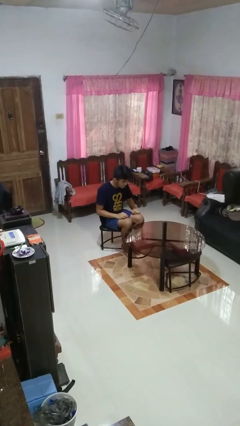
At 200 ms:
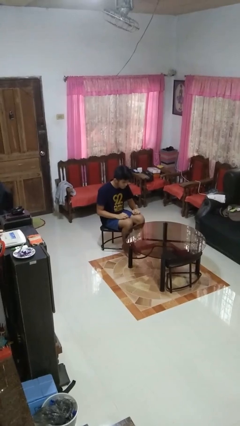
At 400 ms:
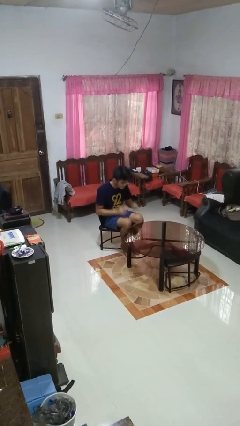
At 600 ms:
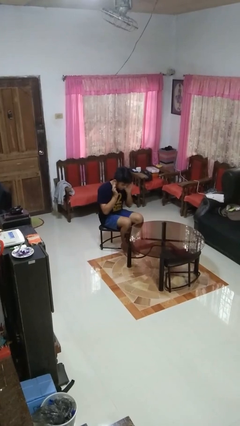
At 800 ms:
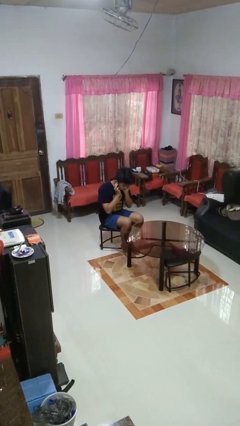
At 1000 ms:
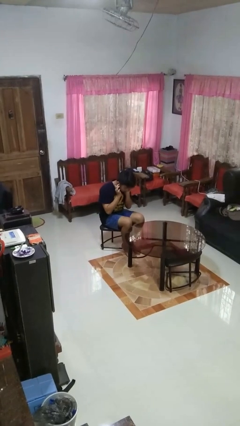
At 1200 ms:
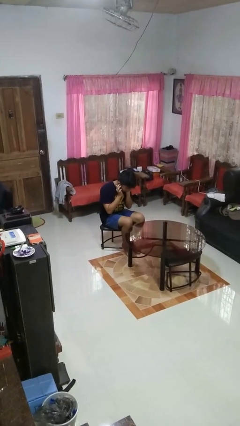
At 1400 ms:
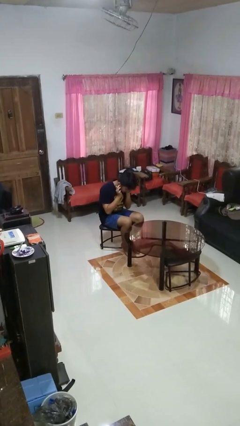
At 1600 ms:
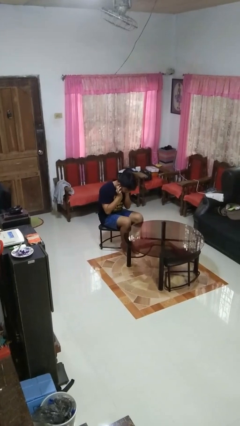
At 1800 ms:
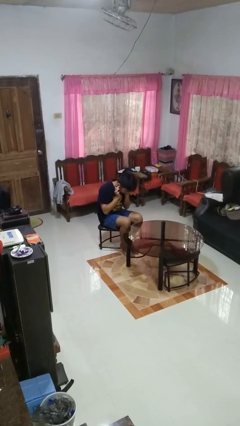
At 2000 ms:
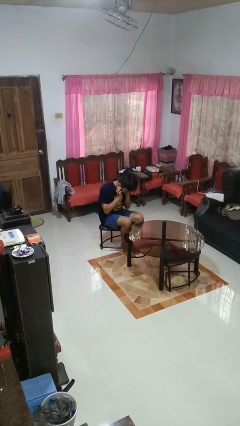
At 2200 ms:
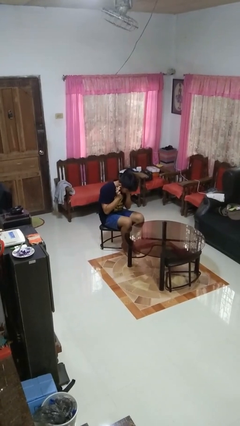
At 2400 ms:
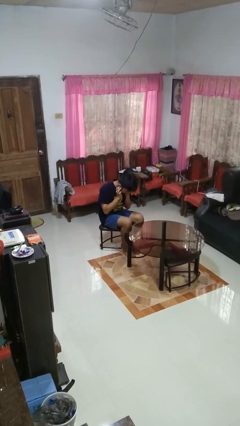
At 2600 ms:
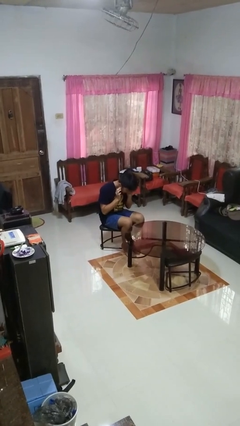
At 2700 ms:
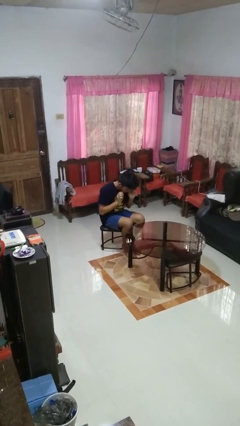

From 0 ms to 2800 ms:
person puts fingers in ear

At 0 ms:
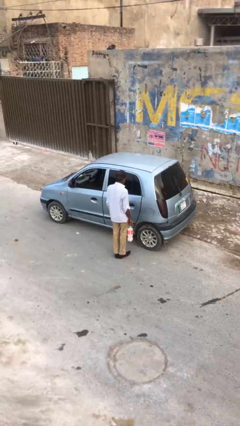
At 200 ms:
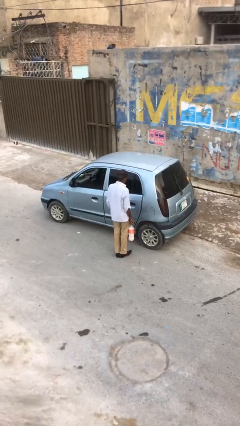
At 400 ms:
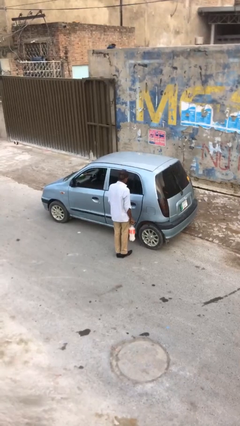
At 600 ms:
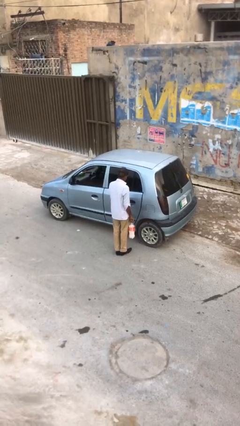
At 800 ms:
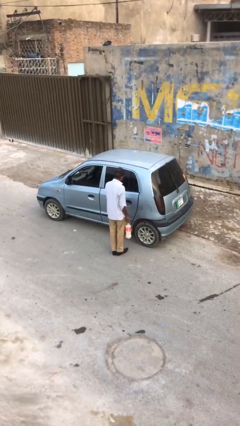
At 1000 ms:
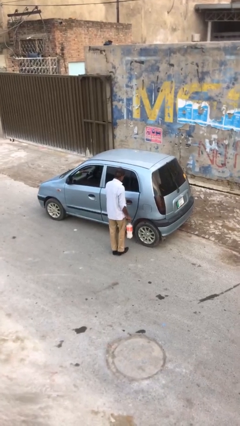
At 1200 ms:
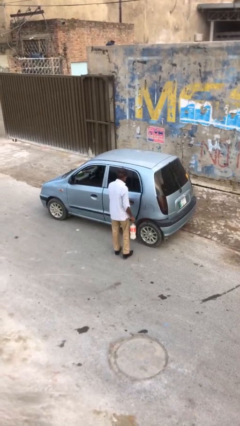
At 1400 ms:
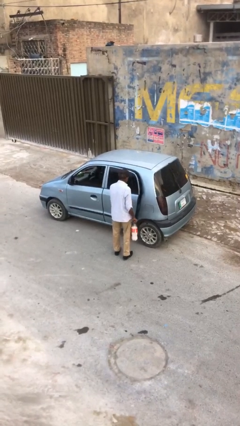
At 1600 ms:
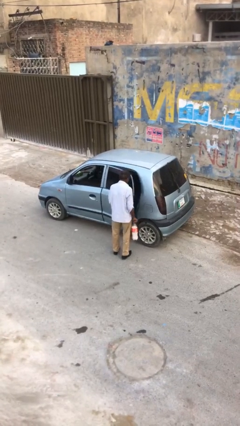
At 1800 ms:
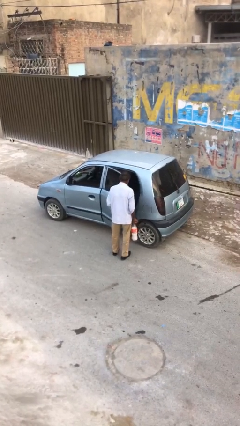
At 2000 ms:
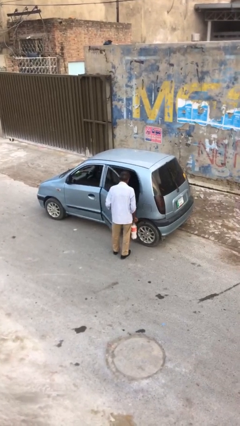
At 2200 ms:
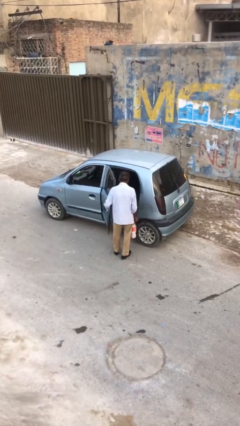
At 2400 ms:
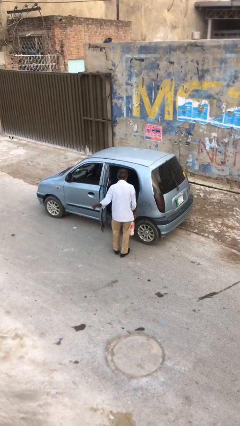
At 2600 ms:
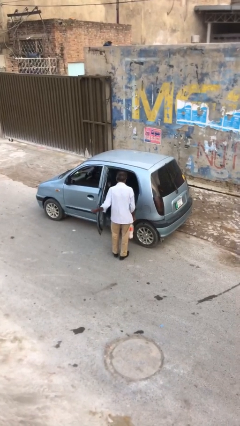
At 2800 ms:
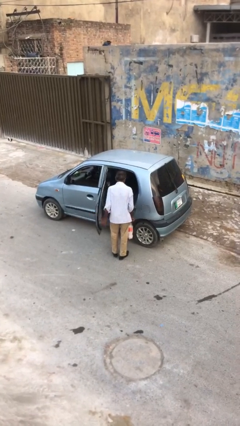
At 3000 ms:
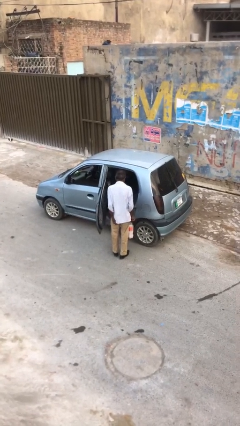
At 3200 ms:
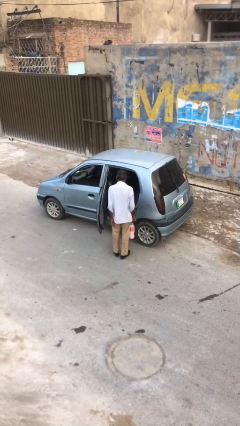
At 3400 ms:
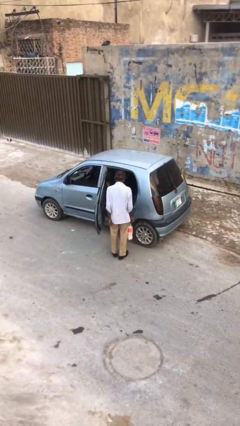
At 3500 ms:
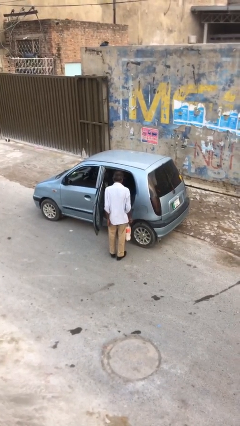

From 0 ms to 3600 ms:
person opens car door

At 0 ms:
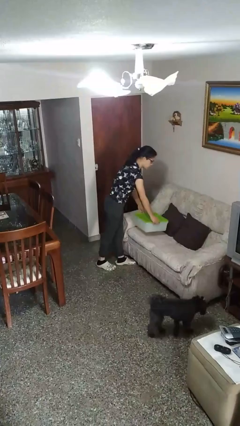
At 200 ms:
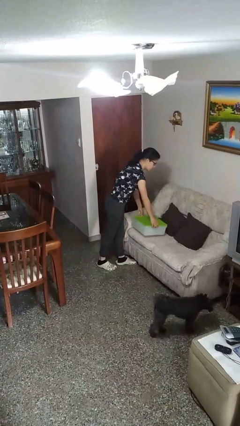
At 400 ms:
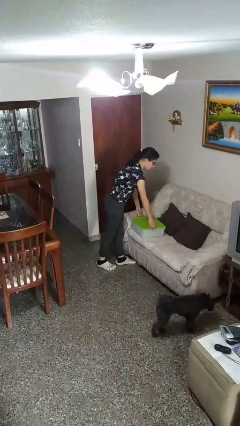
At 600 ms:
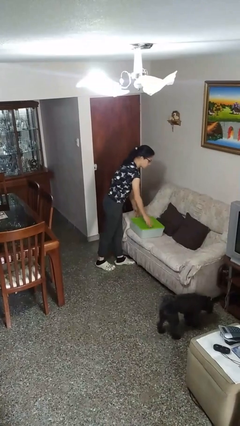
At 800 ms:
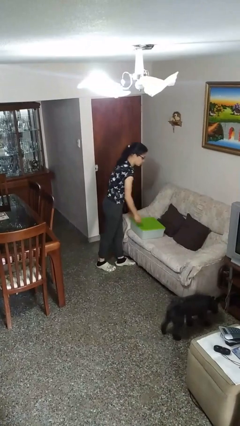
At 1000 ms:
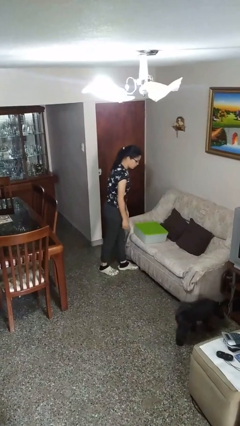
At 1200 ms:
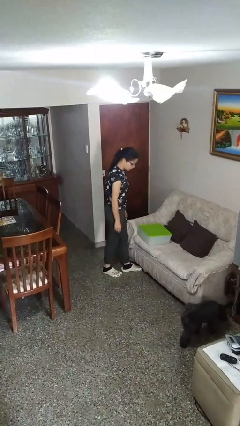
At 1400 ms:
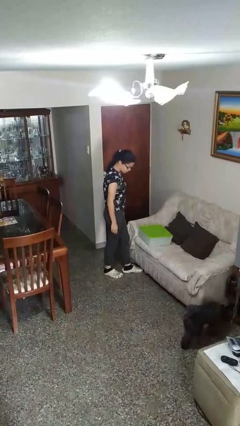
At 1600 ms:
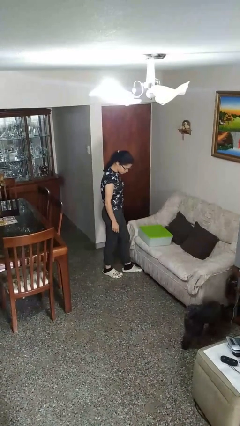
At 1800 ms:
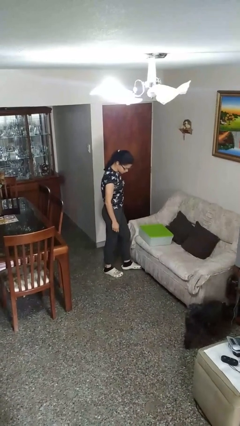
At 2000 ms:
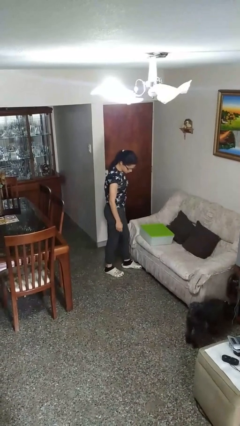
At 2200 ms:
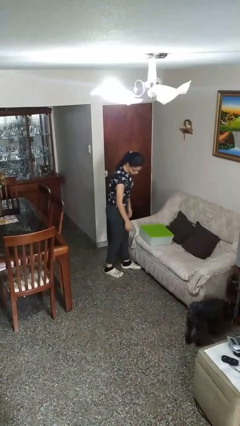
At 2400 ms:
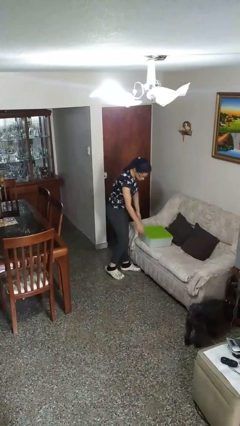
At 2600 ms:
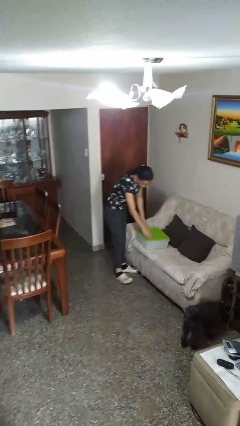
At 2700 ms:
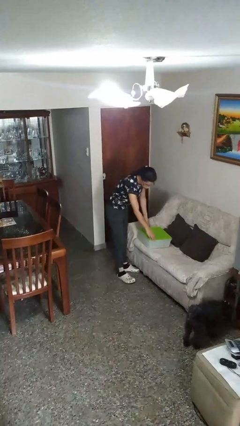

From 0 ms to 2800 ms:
person puts down object on couch

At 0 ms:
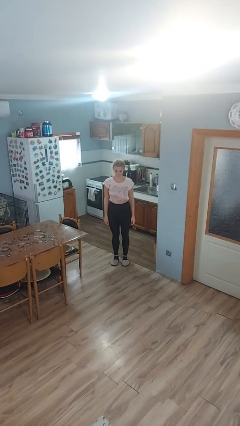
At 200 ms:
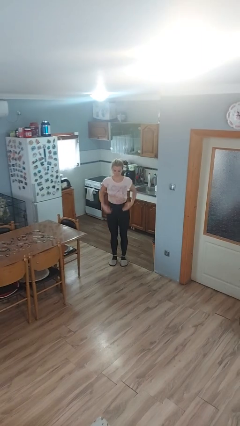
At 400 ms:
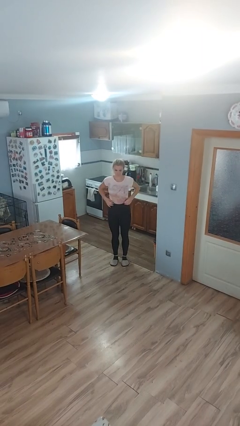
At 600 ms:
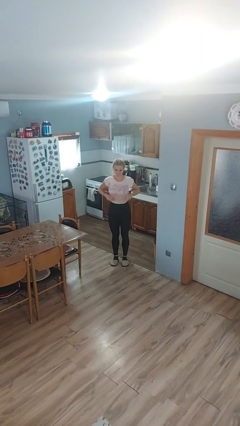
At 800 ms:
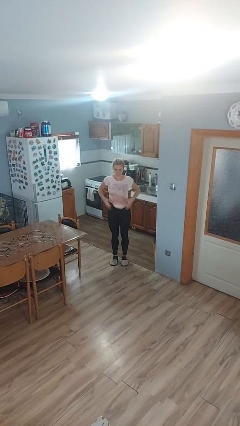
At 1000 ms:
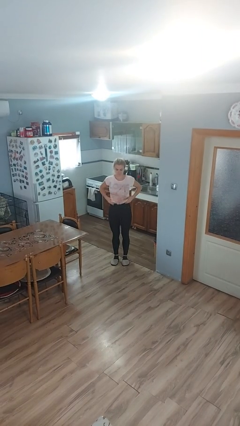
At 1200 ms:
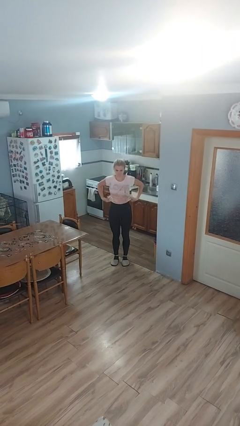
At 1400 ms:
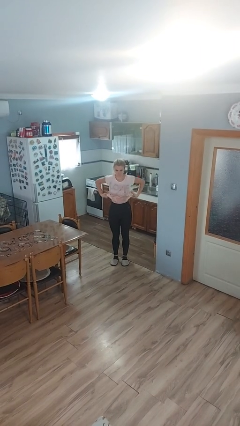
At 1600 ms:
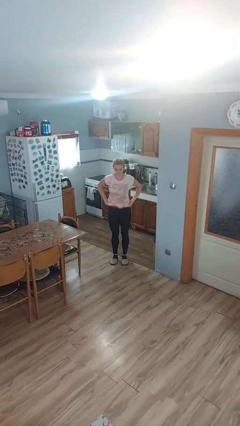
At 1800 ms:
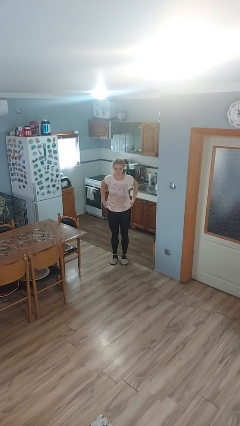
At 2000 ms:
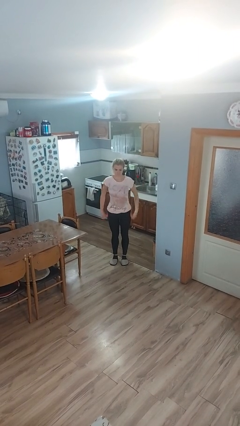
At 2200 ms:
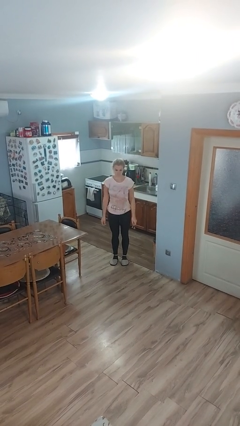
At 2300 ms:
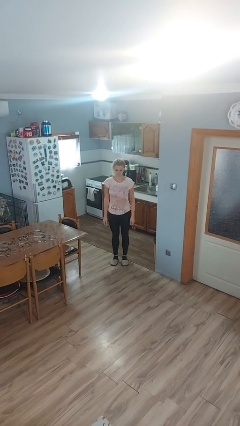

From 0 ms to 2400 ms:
person untucks shirt

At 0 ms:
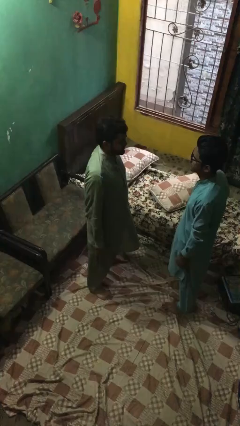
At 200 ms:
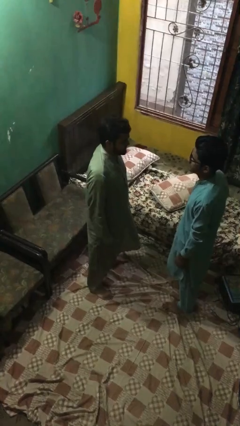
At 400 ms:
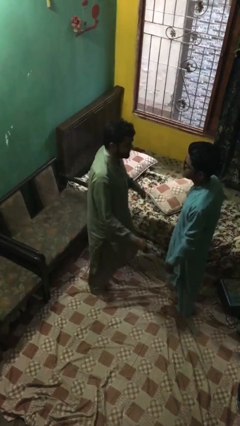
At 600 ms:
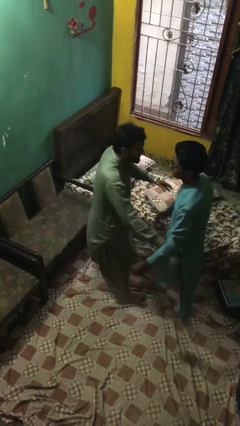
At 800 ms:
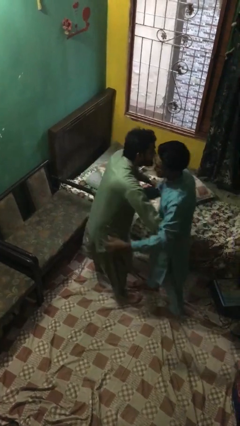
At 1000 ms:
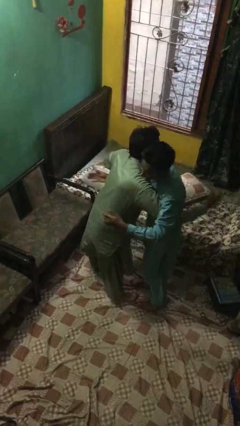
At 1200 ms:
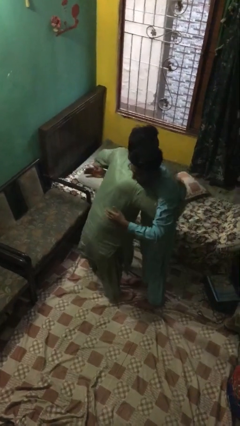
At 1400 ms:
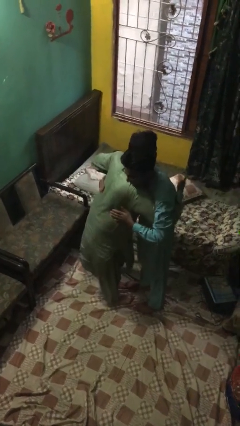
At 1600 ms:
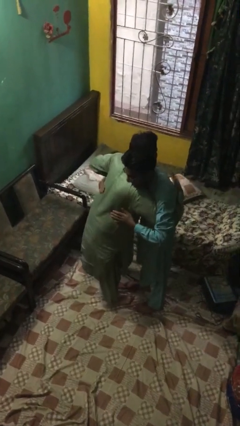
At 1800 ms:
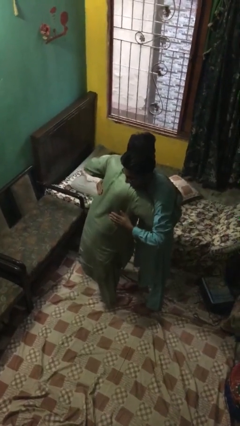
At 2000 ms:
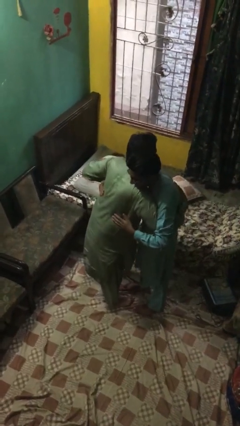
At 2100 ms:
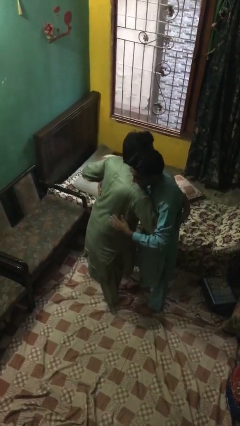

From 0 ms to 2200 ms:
person embraces person

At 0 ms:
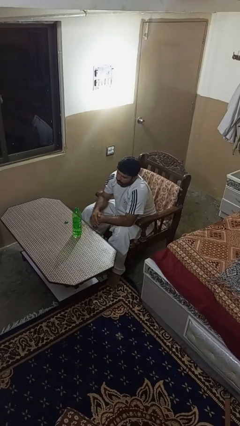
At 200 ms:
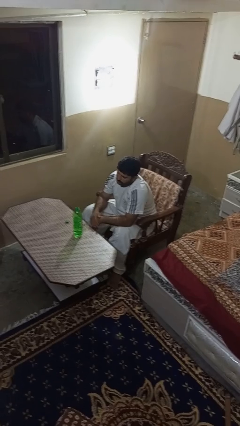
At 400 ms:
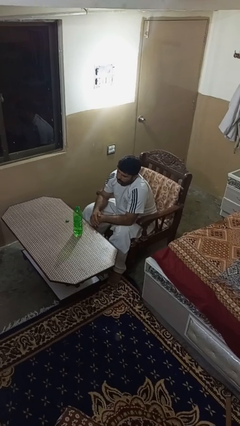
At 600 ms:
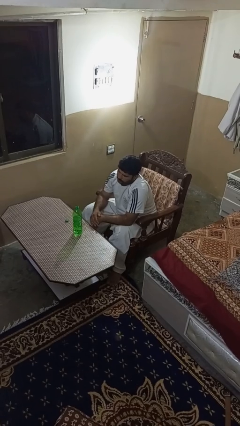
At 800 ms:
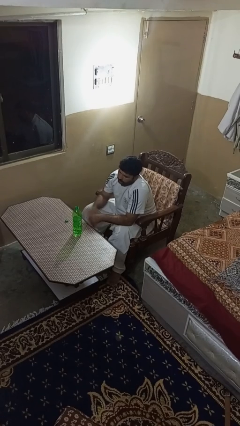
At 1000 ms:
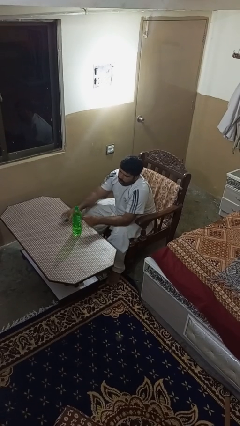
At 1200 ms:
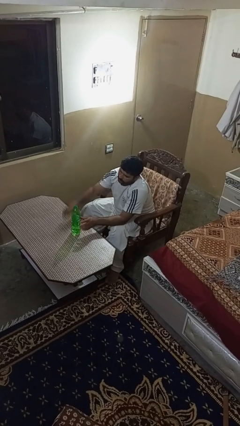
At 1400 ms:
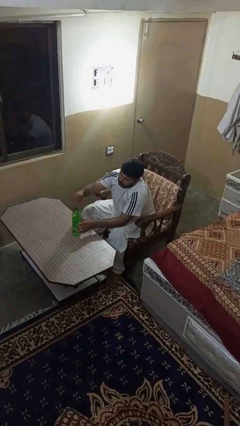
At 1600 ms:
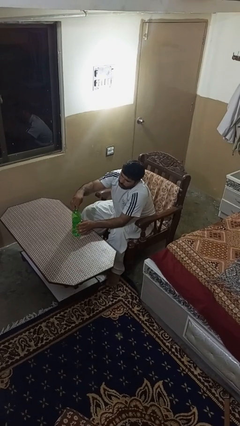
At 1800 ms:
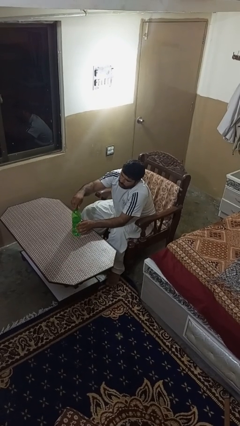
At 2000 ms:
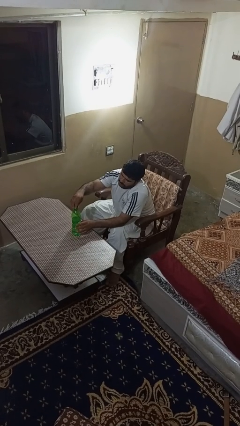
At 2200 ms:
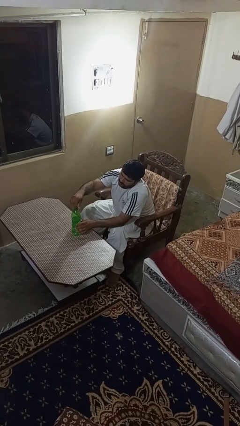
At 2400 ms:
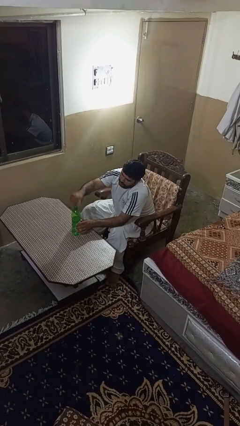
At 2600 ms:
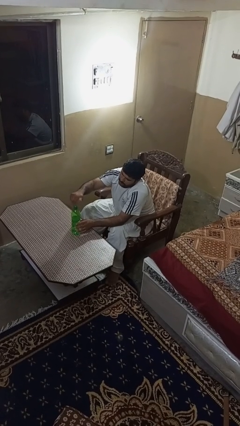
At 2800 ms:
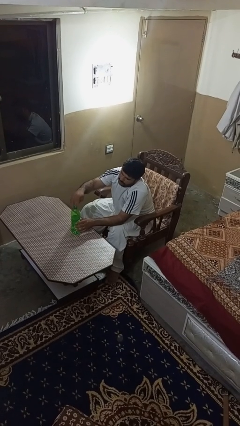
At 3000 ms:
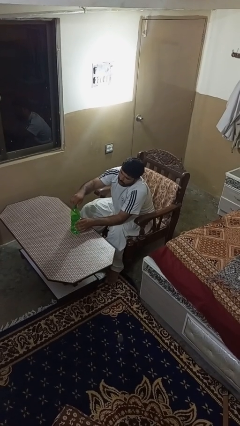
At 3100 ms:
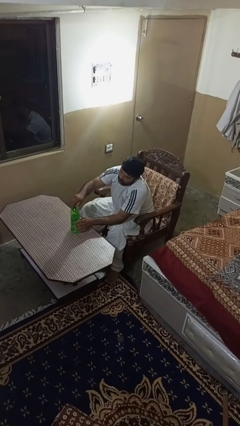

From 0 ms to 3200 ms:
person screws lid to bottle
